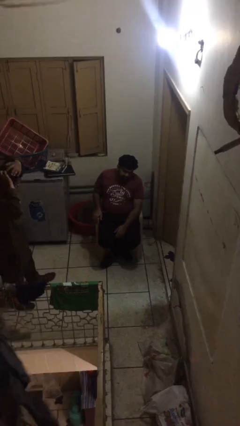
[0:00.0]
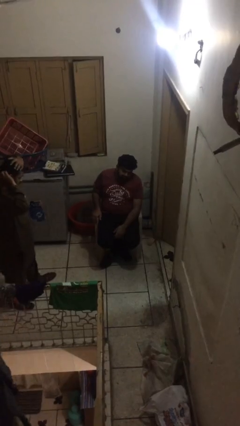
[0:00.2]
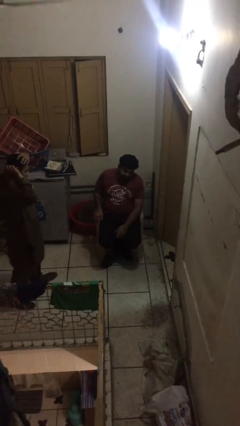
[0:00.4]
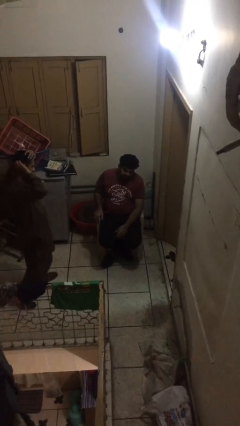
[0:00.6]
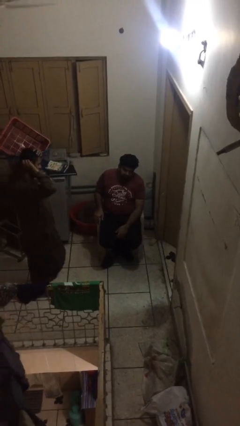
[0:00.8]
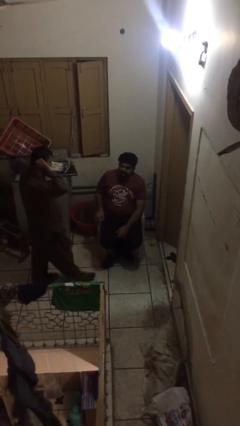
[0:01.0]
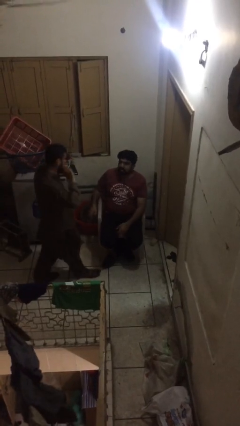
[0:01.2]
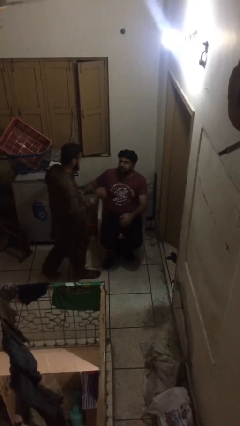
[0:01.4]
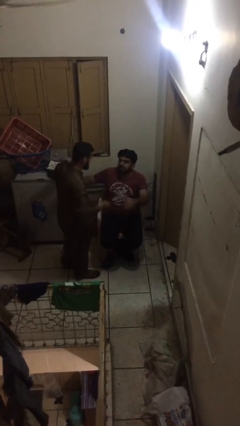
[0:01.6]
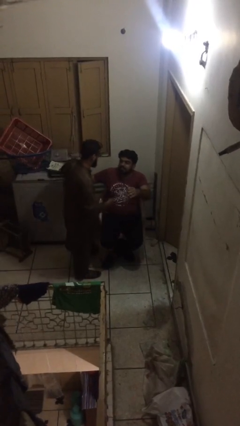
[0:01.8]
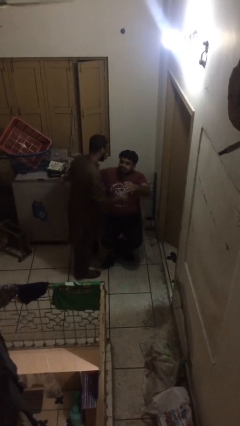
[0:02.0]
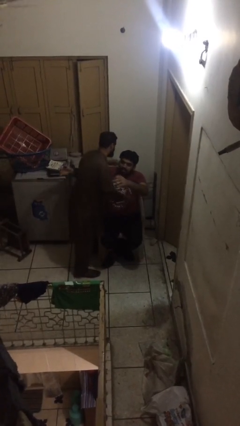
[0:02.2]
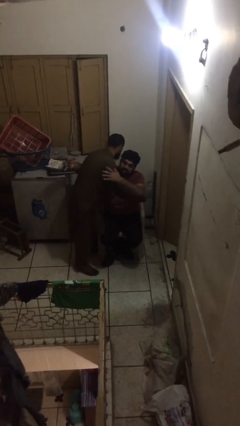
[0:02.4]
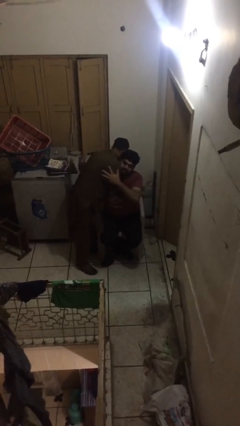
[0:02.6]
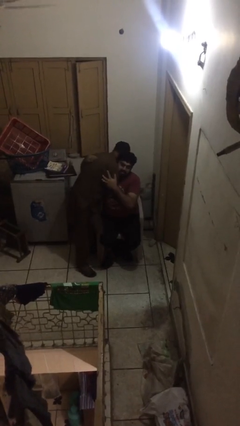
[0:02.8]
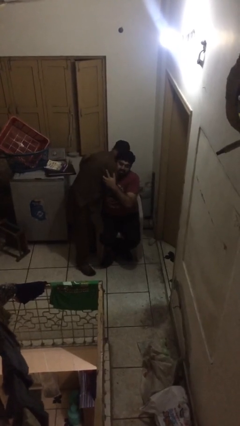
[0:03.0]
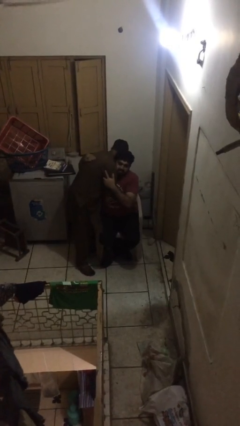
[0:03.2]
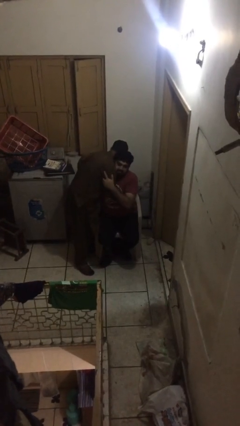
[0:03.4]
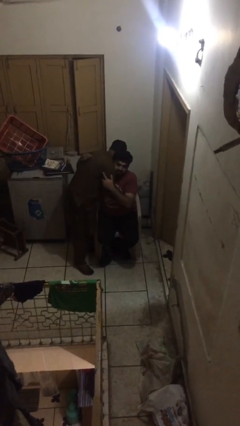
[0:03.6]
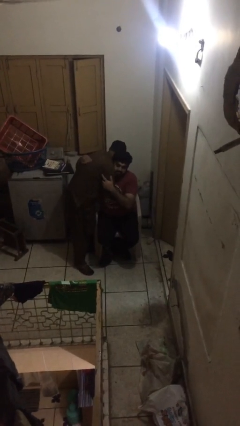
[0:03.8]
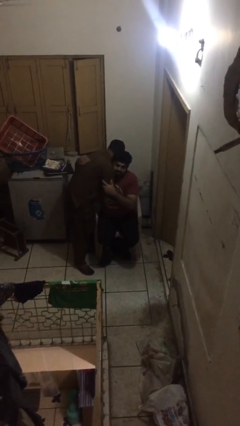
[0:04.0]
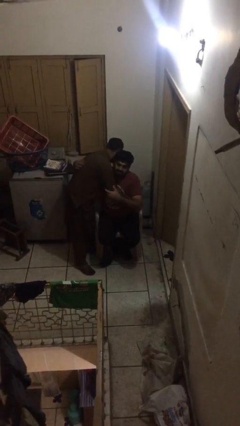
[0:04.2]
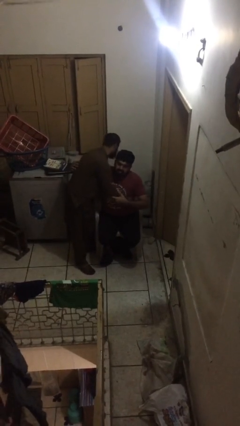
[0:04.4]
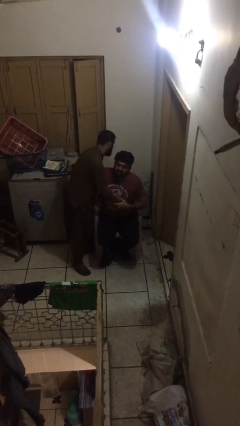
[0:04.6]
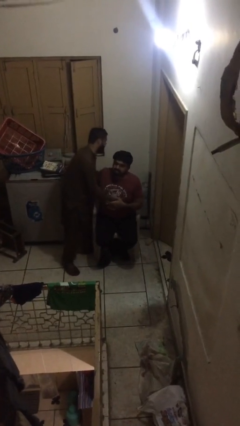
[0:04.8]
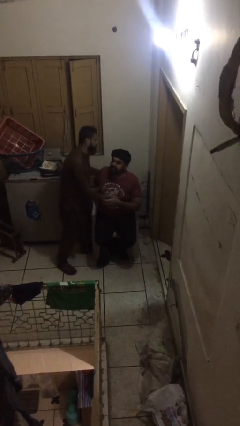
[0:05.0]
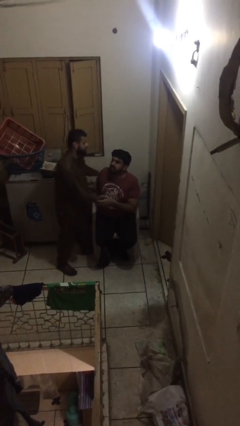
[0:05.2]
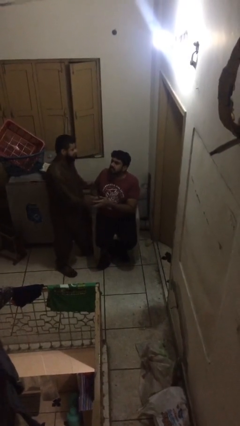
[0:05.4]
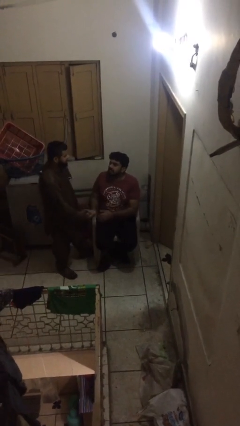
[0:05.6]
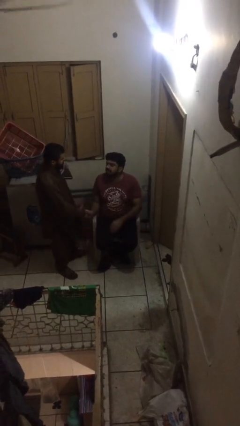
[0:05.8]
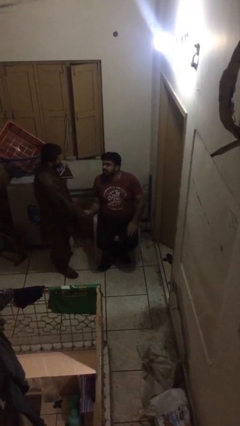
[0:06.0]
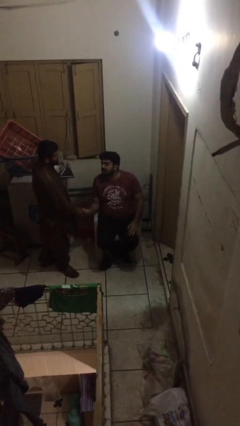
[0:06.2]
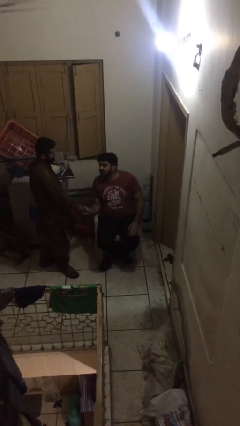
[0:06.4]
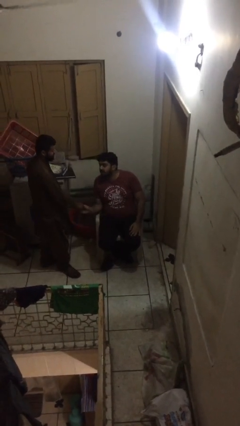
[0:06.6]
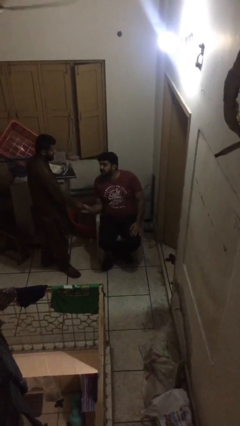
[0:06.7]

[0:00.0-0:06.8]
person embraces person

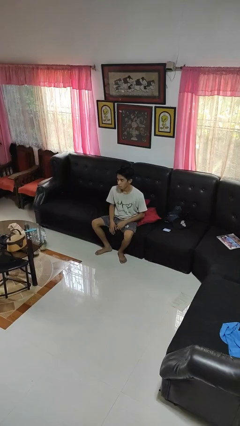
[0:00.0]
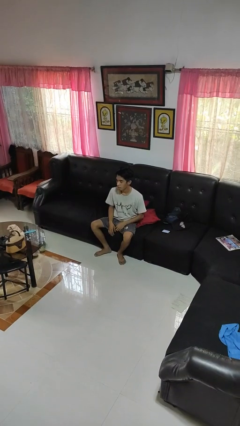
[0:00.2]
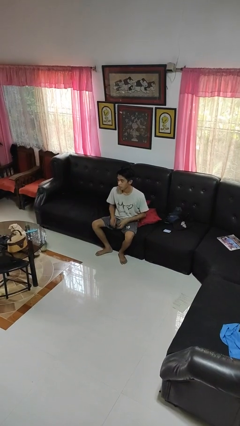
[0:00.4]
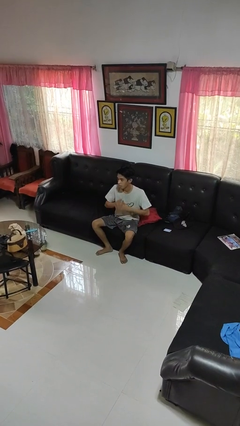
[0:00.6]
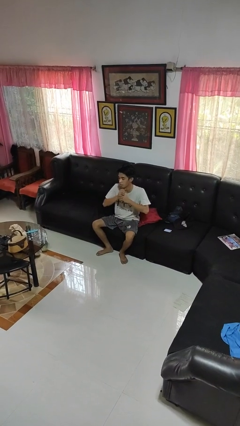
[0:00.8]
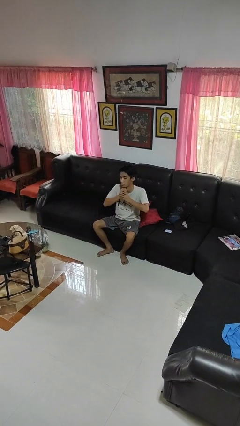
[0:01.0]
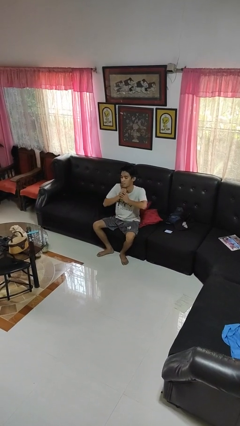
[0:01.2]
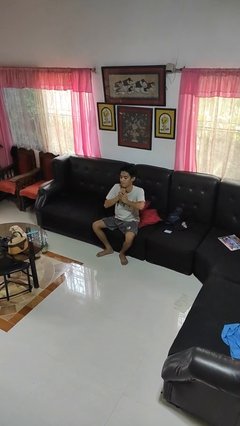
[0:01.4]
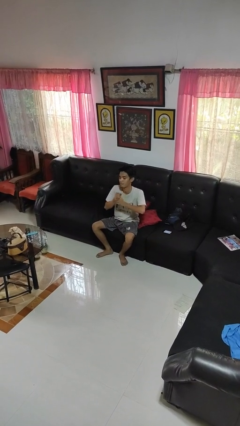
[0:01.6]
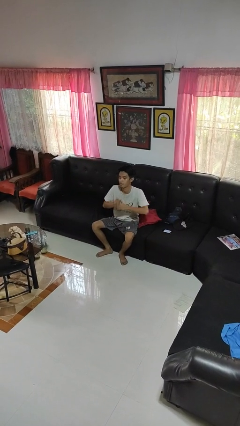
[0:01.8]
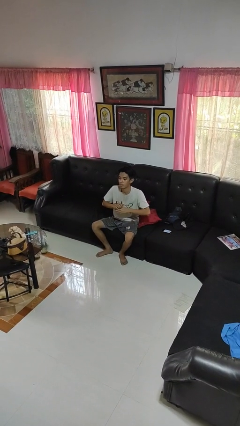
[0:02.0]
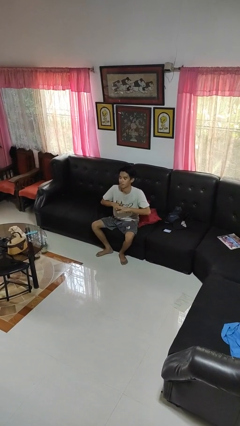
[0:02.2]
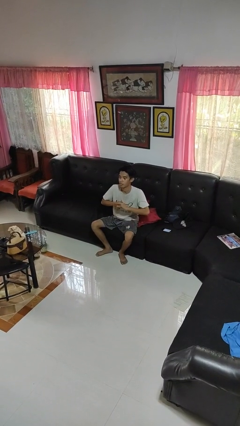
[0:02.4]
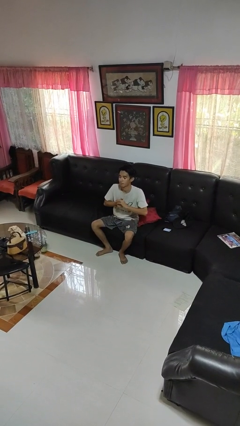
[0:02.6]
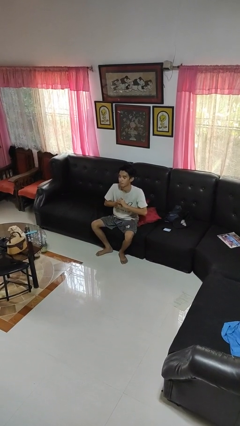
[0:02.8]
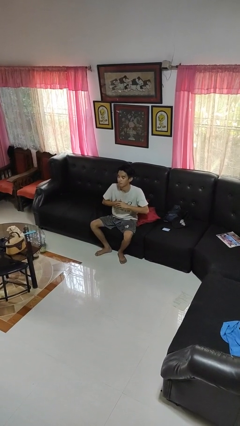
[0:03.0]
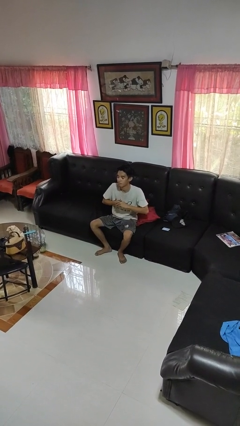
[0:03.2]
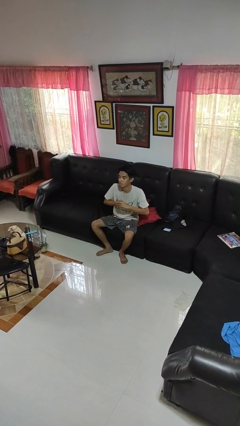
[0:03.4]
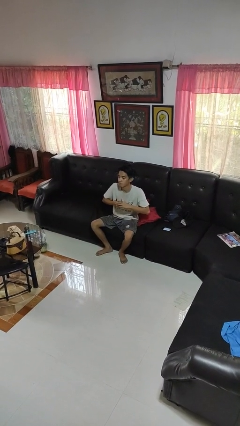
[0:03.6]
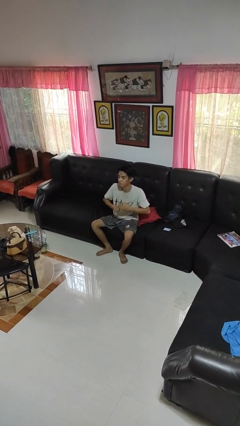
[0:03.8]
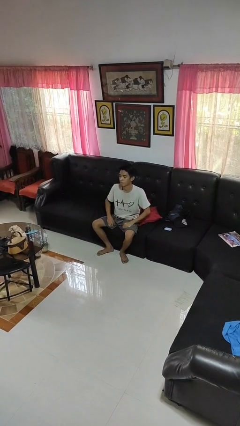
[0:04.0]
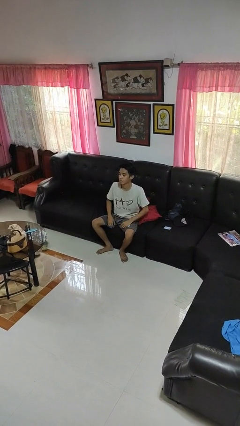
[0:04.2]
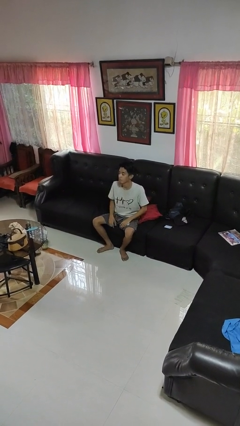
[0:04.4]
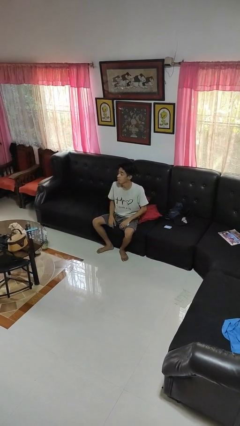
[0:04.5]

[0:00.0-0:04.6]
person cracks knuckles

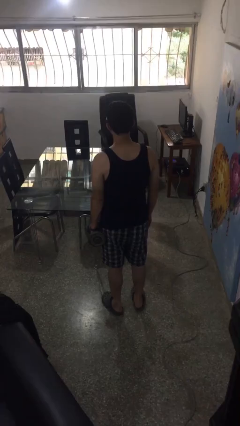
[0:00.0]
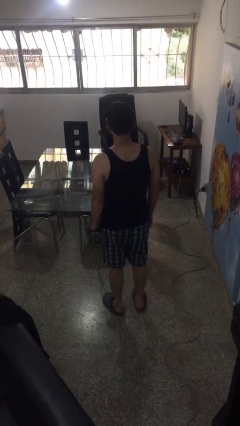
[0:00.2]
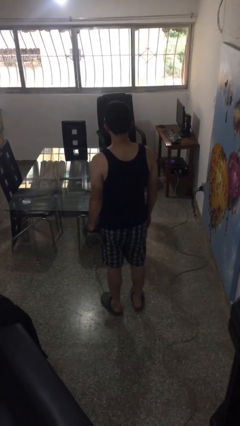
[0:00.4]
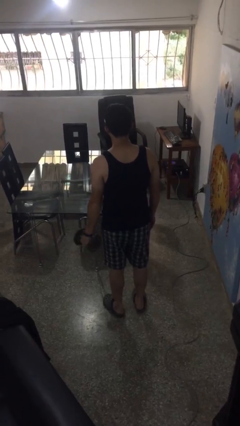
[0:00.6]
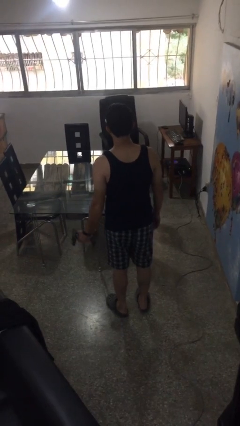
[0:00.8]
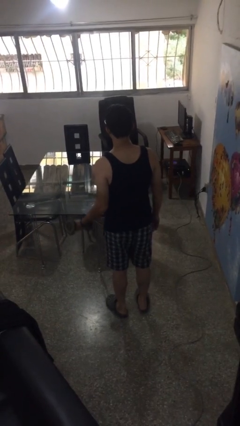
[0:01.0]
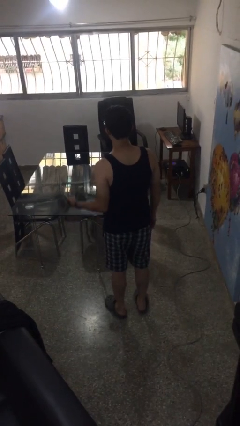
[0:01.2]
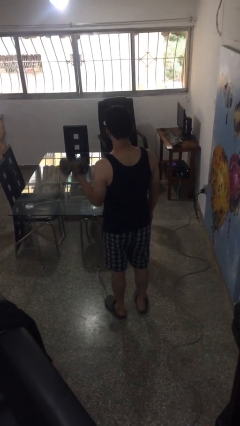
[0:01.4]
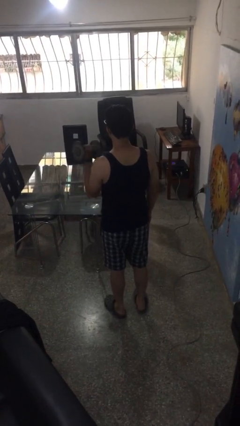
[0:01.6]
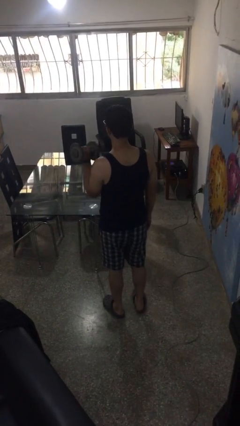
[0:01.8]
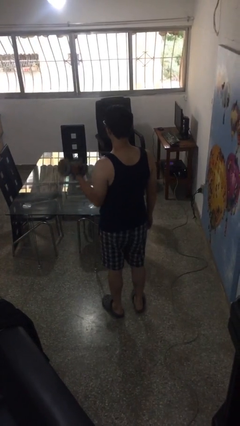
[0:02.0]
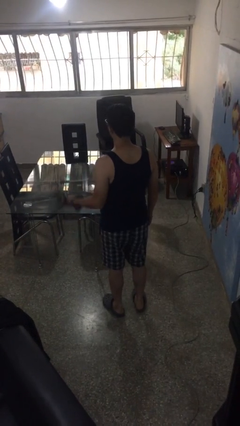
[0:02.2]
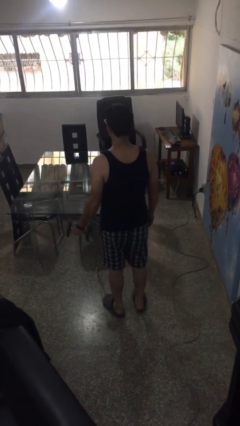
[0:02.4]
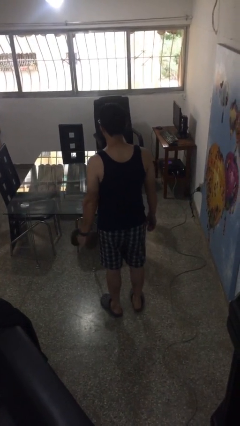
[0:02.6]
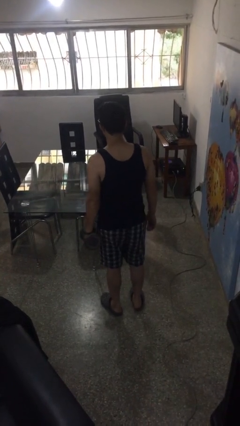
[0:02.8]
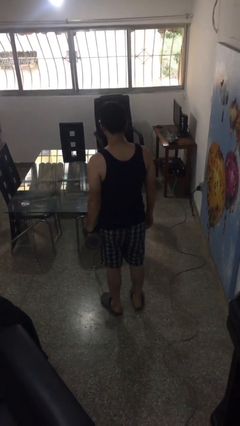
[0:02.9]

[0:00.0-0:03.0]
person lifts dumbbells

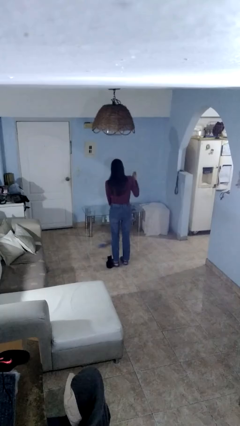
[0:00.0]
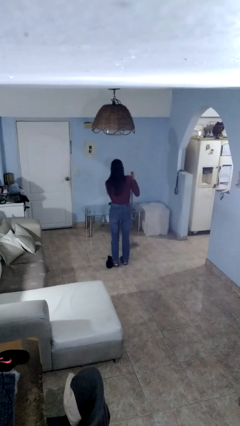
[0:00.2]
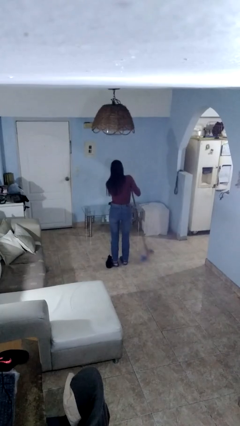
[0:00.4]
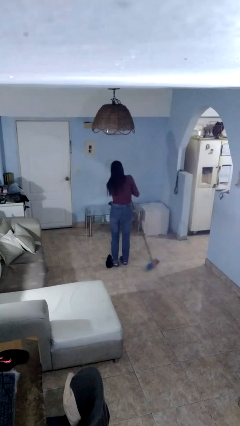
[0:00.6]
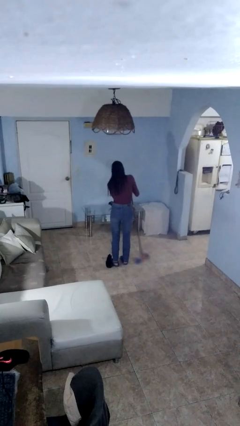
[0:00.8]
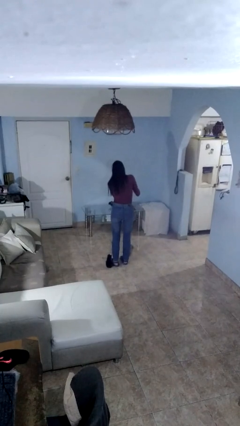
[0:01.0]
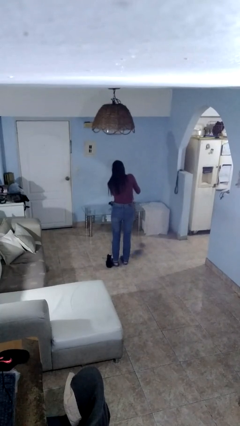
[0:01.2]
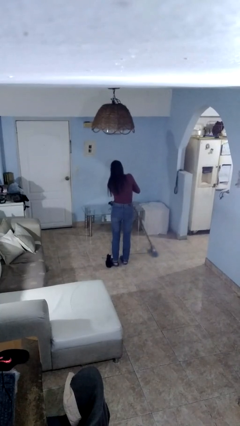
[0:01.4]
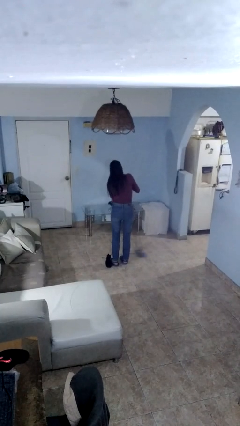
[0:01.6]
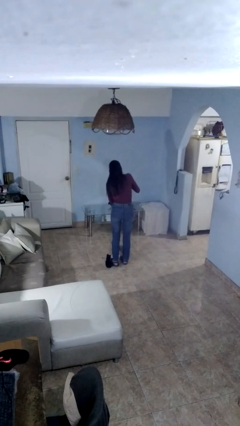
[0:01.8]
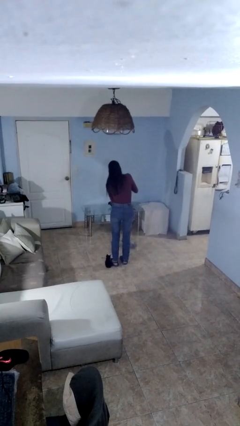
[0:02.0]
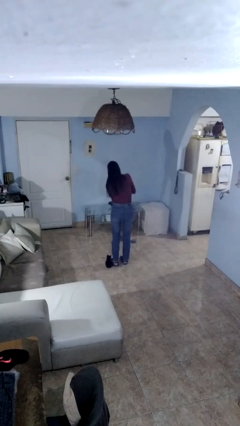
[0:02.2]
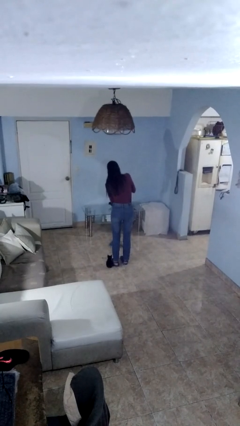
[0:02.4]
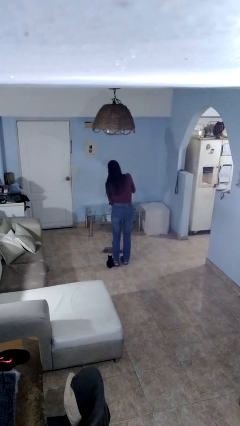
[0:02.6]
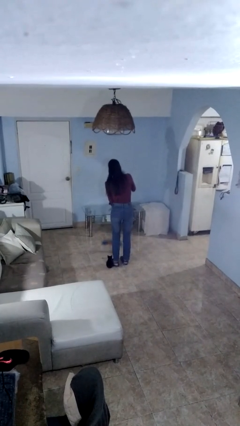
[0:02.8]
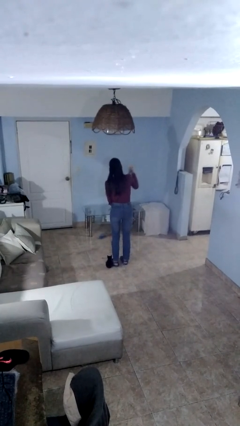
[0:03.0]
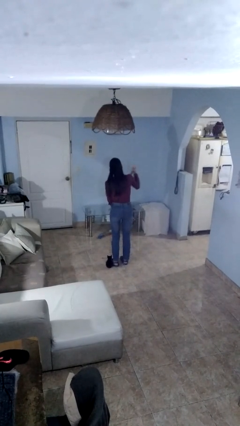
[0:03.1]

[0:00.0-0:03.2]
person sweeps floor
